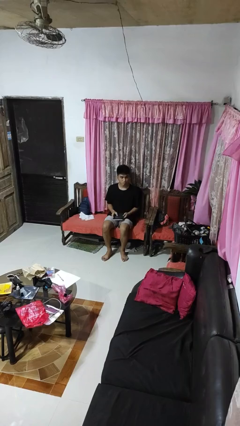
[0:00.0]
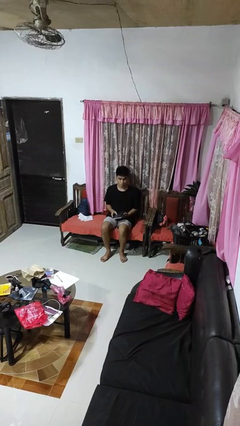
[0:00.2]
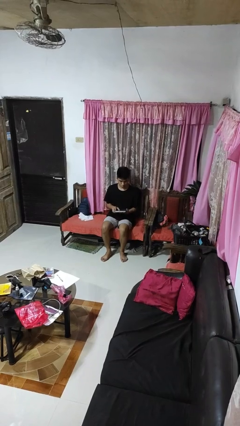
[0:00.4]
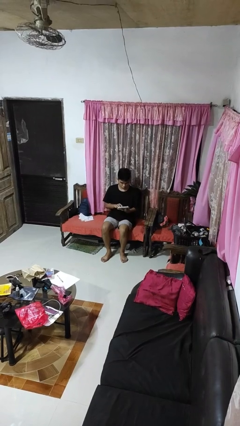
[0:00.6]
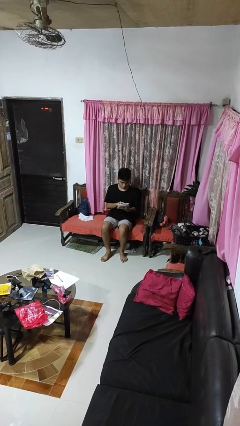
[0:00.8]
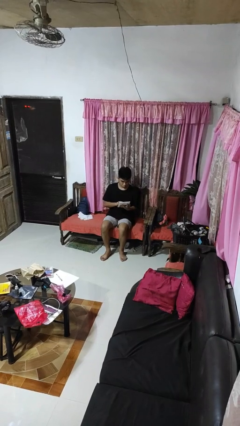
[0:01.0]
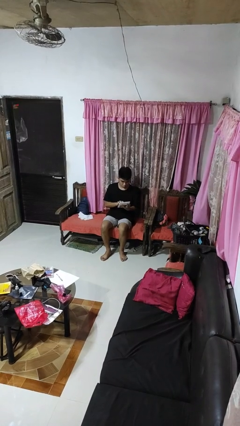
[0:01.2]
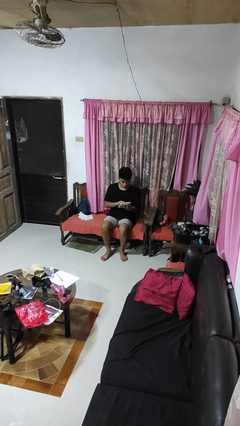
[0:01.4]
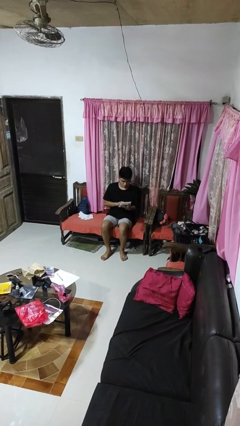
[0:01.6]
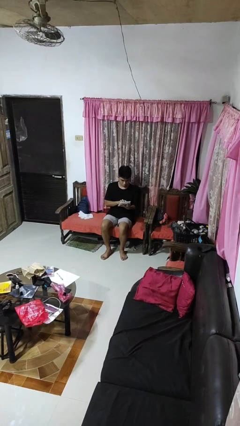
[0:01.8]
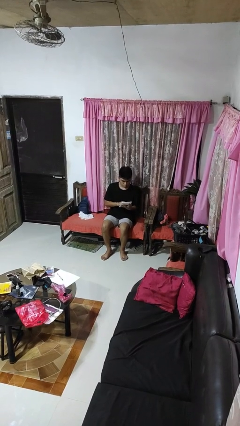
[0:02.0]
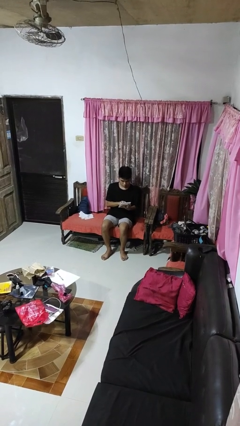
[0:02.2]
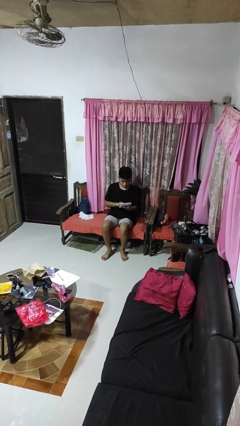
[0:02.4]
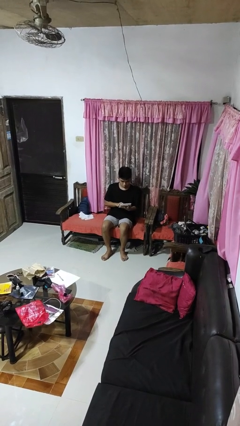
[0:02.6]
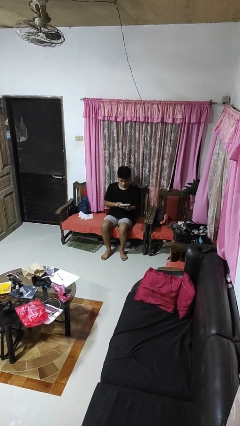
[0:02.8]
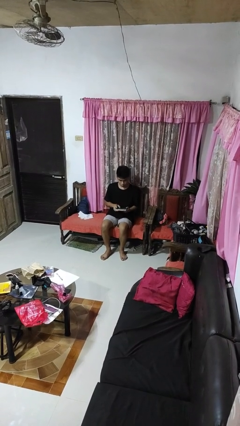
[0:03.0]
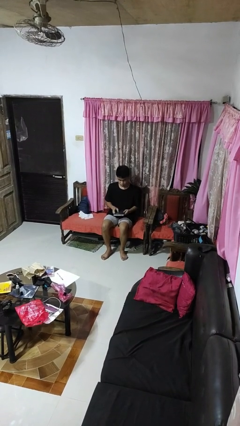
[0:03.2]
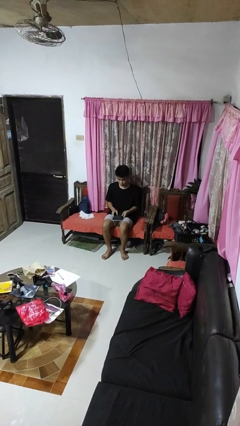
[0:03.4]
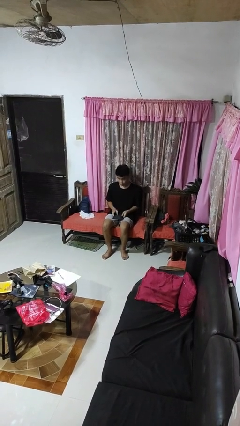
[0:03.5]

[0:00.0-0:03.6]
person interacts with tablet

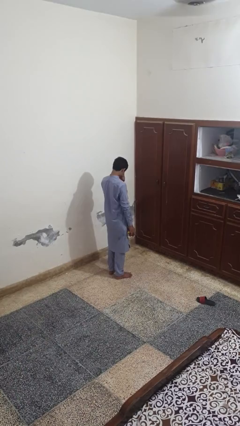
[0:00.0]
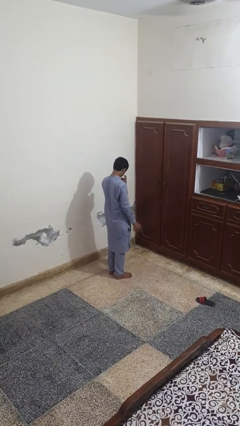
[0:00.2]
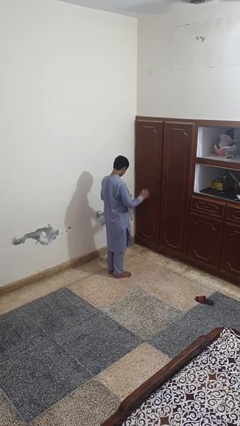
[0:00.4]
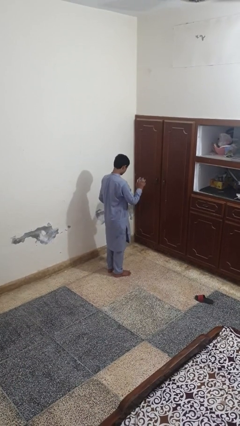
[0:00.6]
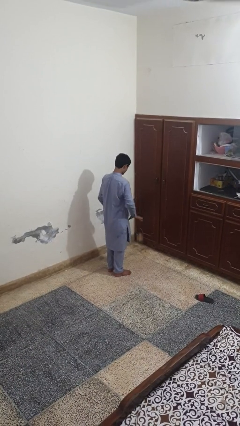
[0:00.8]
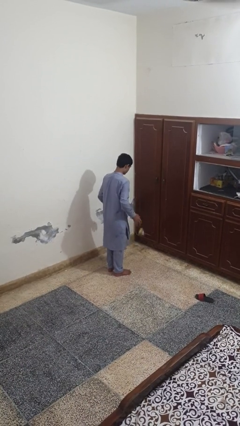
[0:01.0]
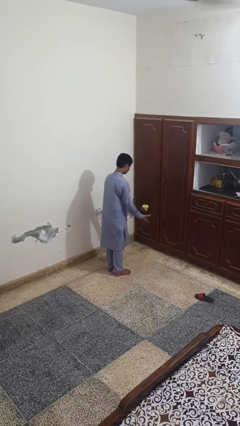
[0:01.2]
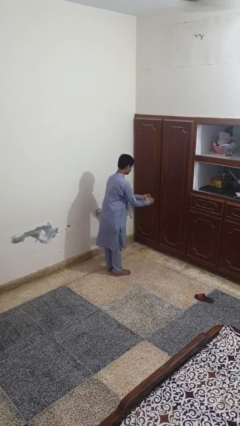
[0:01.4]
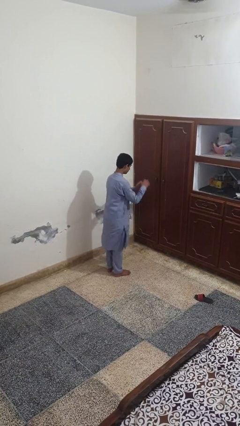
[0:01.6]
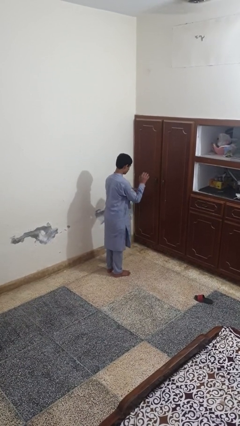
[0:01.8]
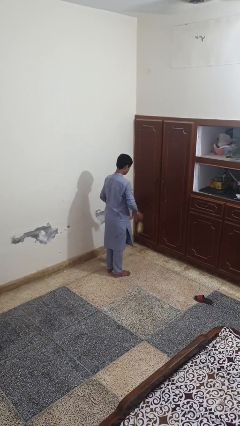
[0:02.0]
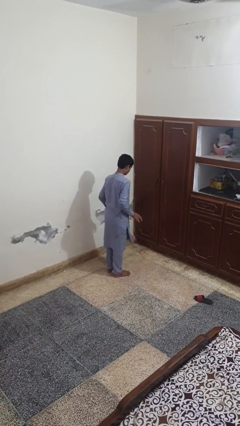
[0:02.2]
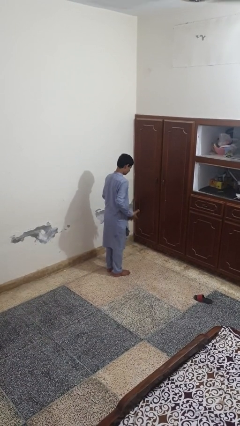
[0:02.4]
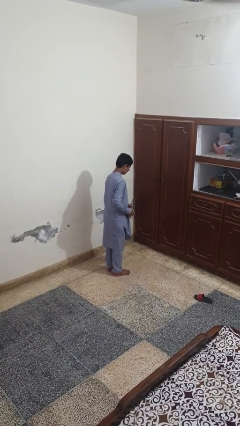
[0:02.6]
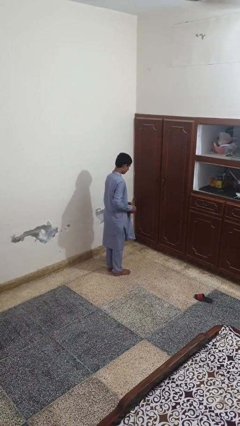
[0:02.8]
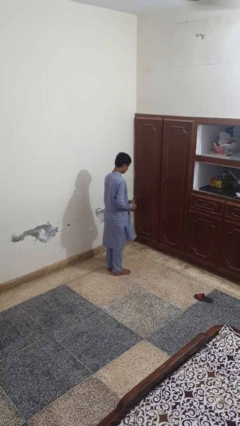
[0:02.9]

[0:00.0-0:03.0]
person bounces ball on floor

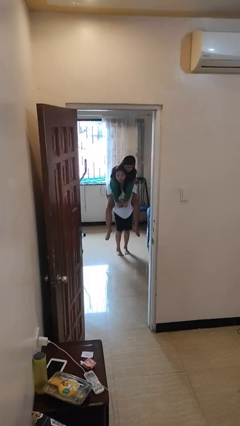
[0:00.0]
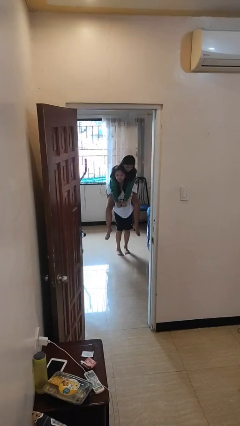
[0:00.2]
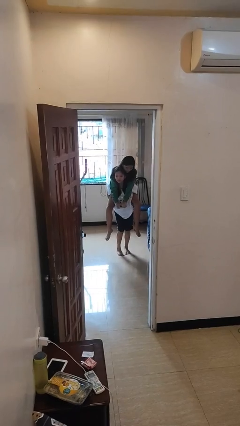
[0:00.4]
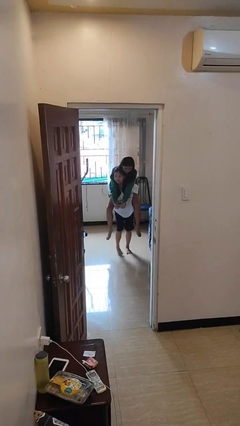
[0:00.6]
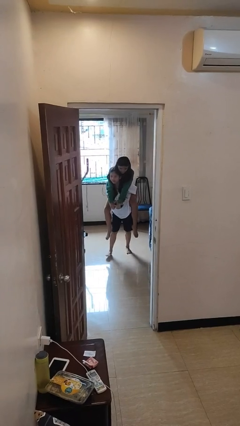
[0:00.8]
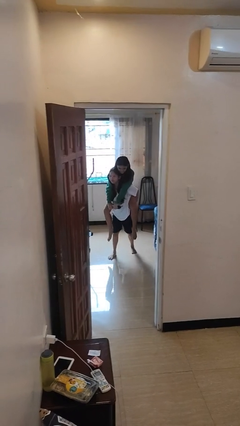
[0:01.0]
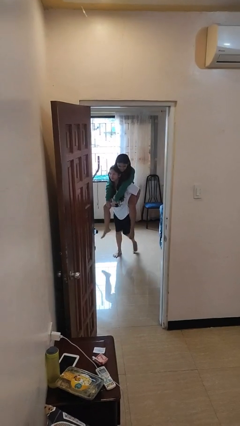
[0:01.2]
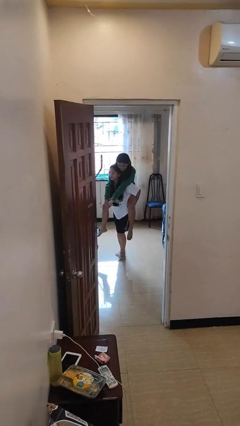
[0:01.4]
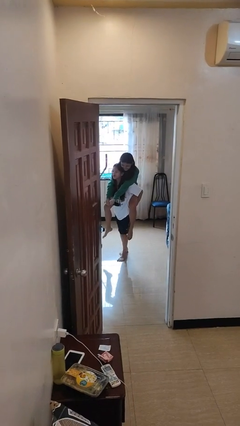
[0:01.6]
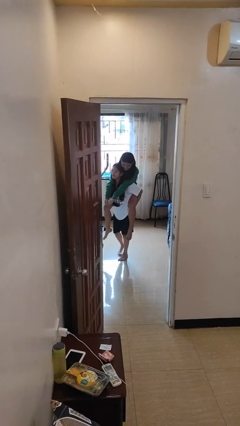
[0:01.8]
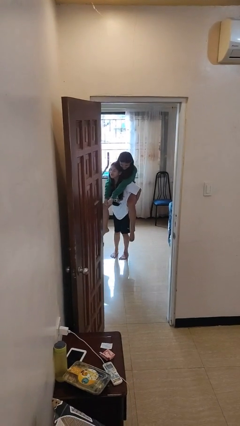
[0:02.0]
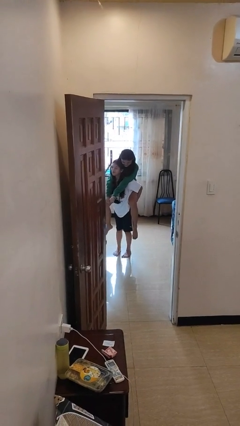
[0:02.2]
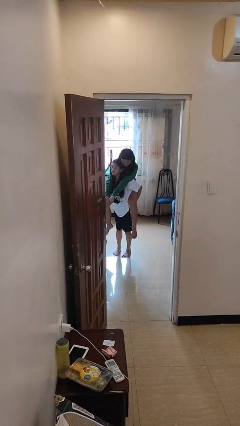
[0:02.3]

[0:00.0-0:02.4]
person carries person on back

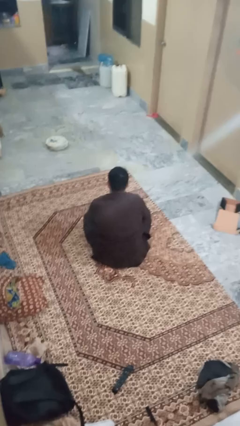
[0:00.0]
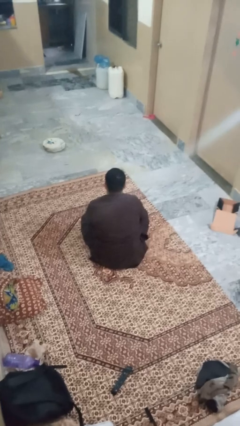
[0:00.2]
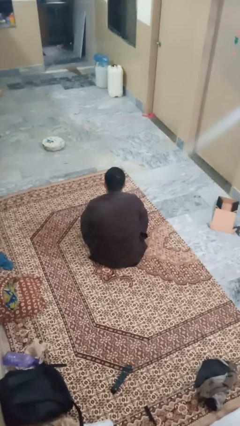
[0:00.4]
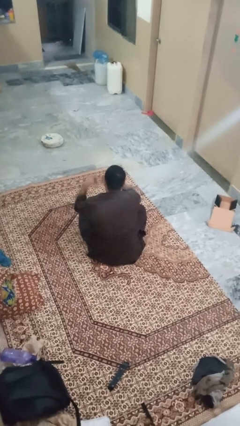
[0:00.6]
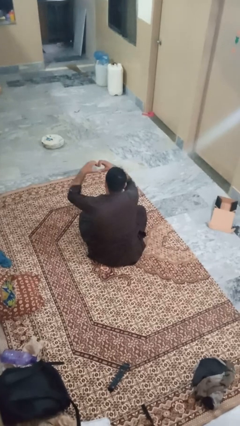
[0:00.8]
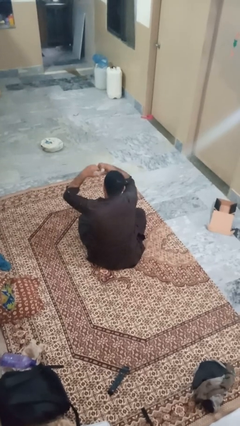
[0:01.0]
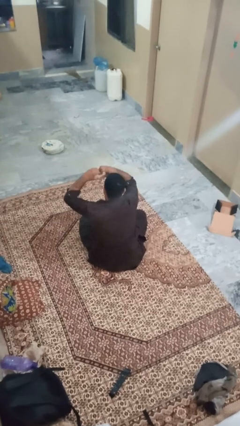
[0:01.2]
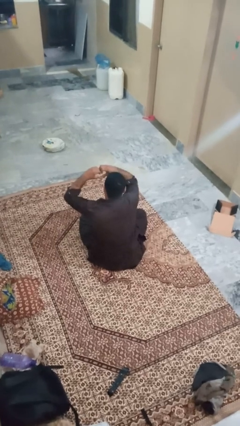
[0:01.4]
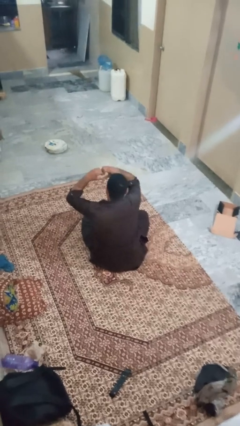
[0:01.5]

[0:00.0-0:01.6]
person gestures heart

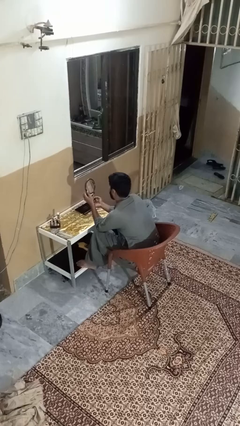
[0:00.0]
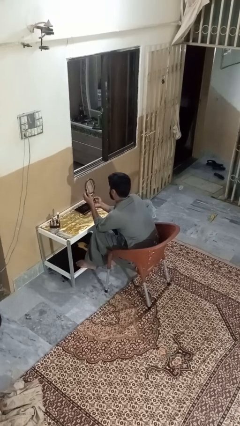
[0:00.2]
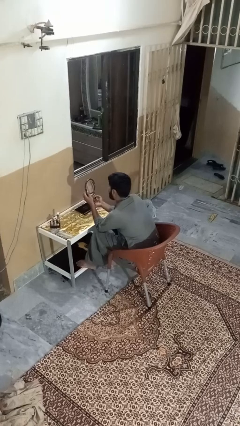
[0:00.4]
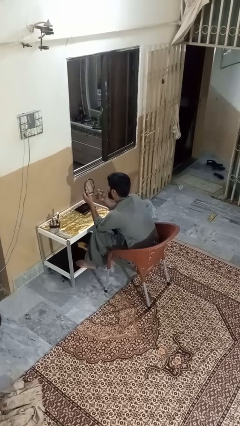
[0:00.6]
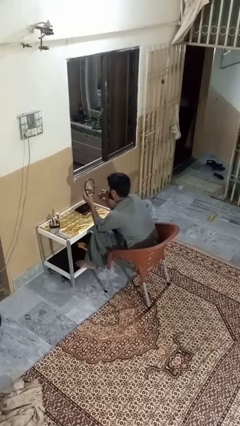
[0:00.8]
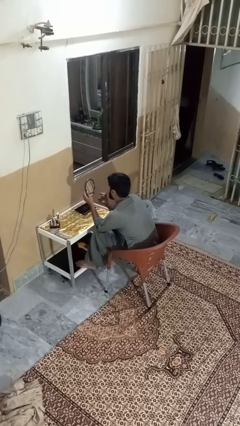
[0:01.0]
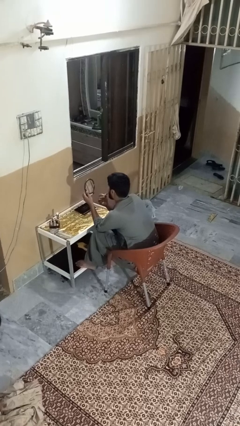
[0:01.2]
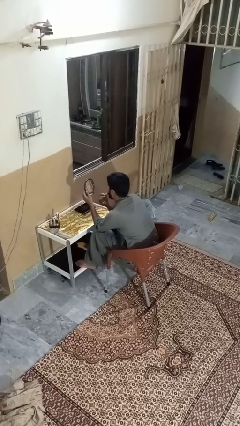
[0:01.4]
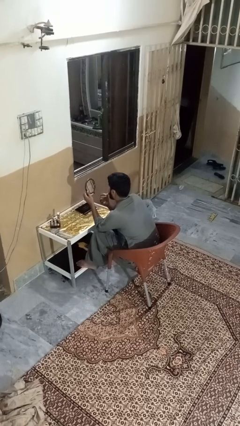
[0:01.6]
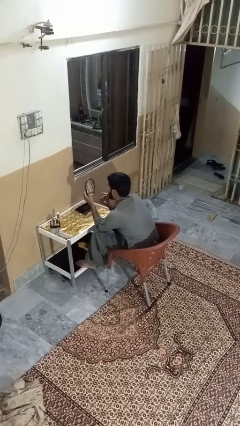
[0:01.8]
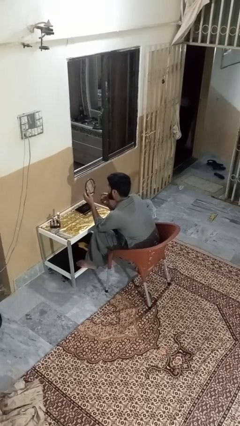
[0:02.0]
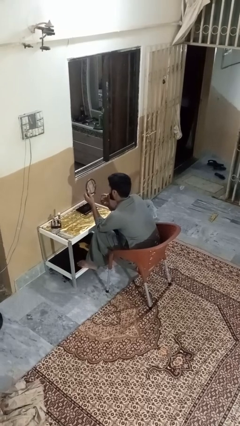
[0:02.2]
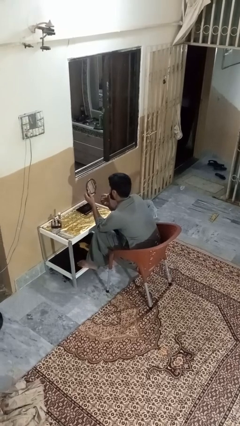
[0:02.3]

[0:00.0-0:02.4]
person applies lip makeup

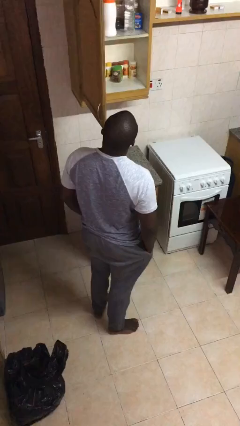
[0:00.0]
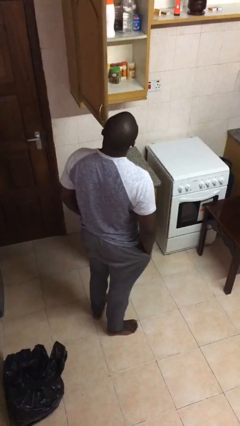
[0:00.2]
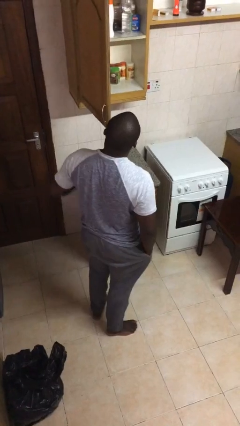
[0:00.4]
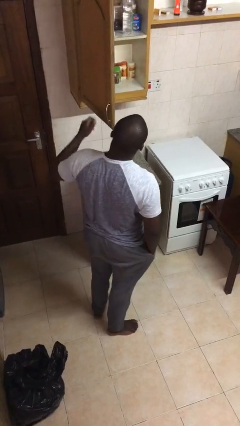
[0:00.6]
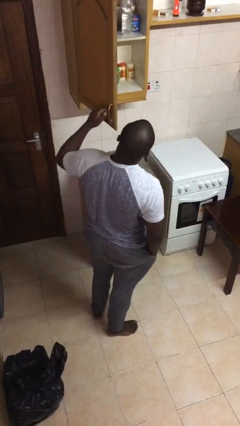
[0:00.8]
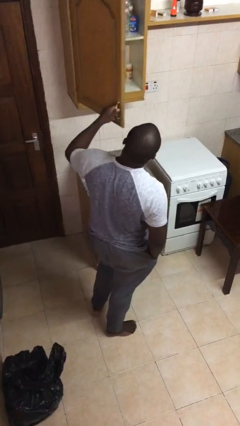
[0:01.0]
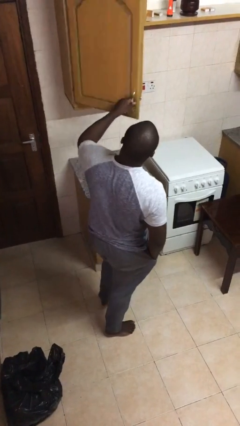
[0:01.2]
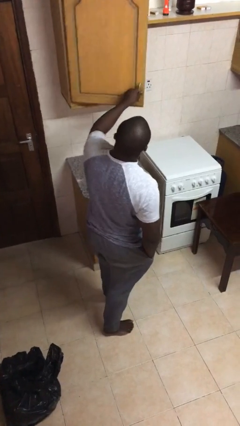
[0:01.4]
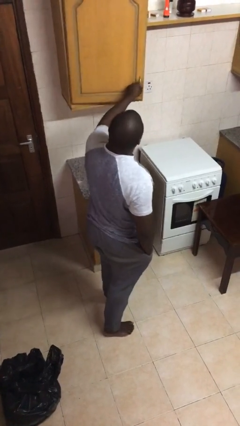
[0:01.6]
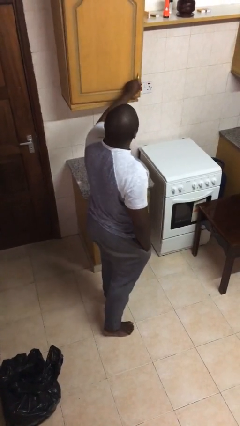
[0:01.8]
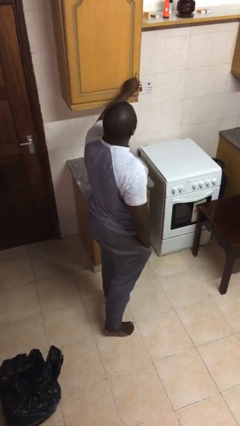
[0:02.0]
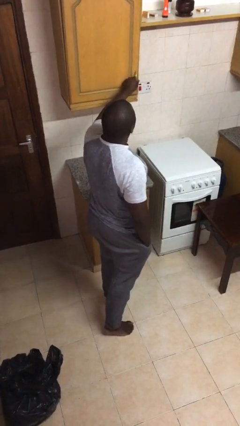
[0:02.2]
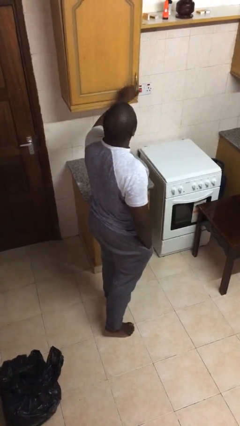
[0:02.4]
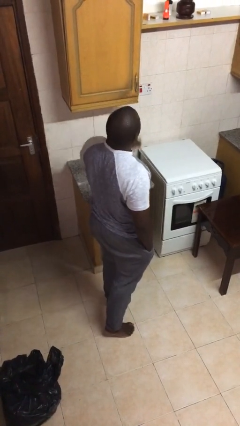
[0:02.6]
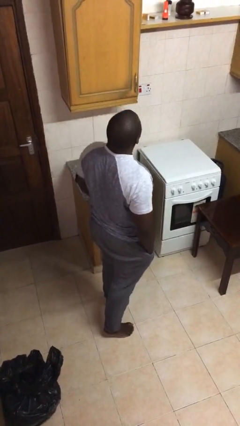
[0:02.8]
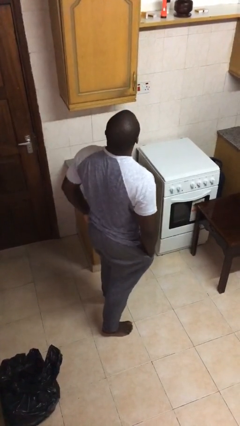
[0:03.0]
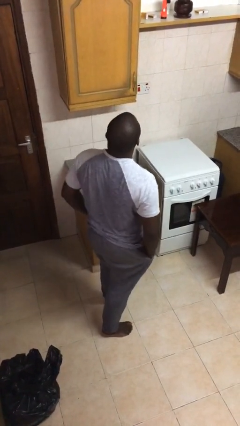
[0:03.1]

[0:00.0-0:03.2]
person closes cabinet

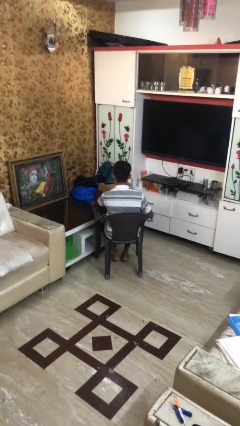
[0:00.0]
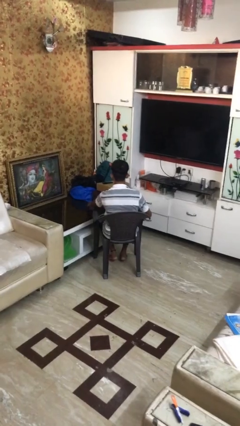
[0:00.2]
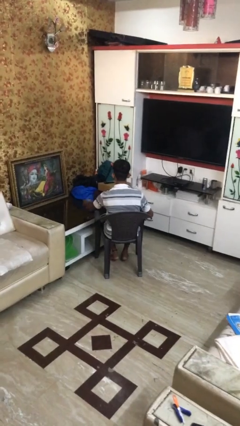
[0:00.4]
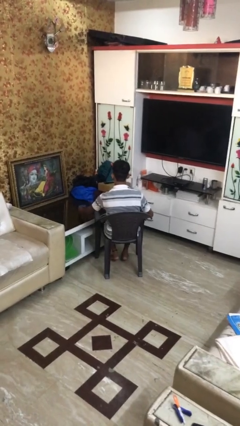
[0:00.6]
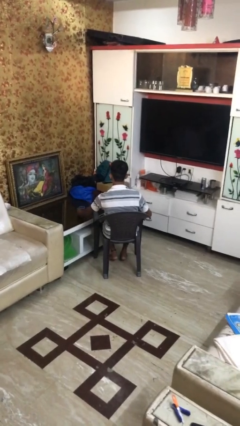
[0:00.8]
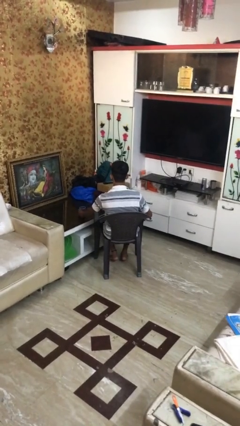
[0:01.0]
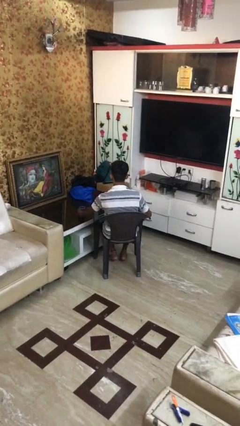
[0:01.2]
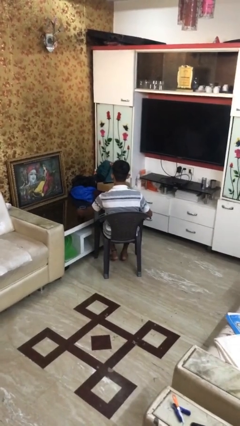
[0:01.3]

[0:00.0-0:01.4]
person sets upright glass
